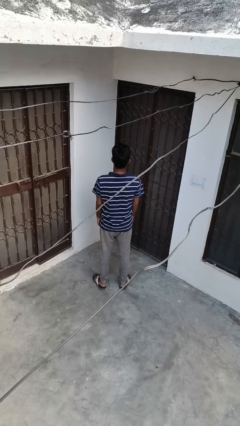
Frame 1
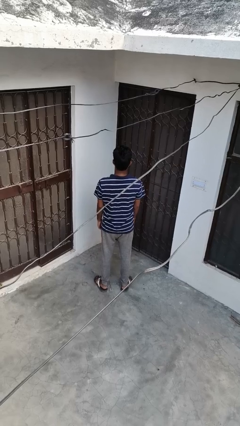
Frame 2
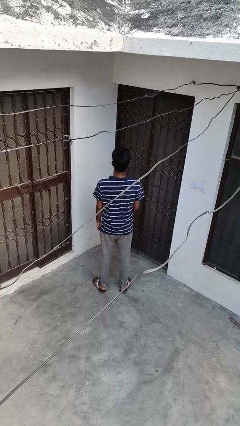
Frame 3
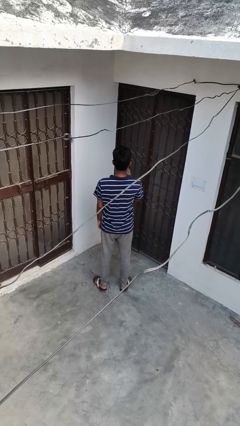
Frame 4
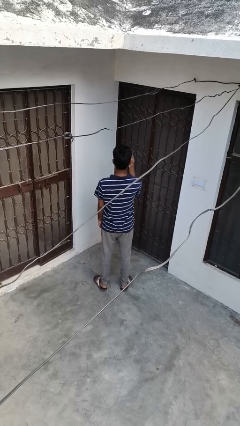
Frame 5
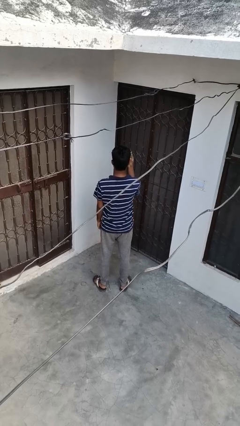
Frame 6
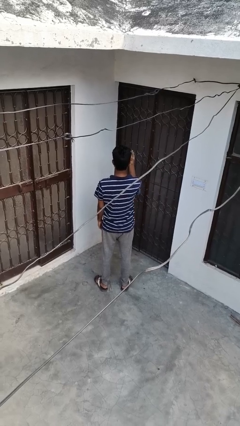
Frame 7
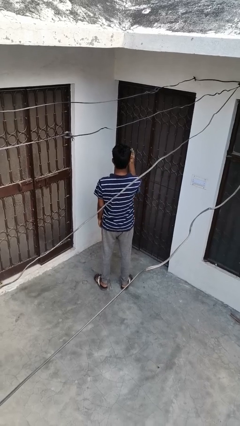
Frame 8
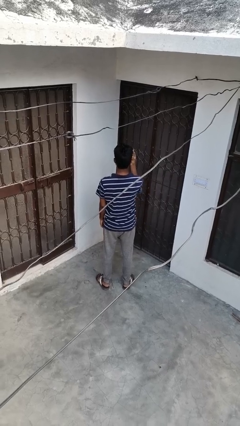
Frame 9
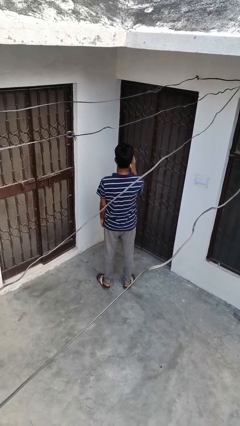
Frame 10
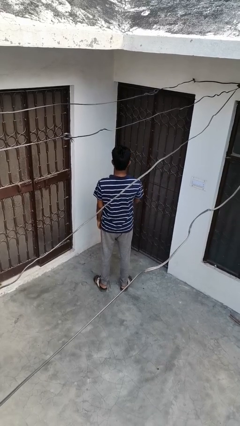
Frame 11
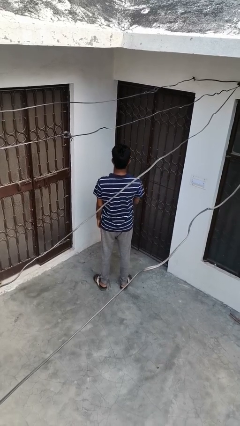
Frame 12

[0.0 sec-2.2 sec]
person gestures number four

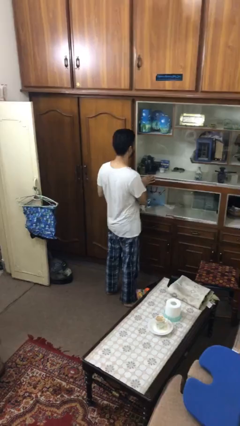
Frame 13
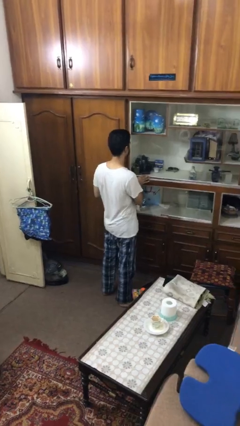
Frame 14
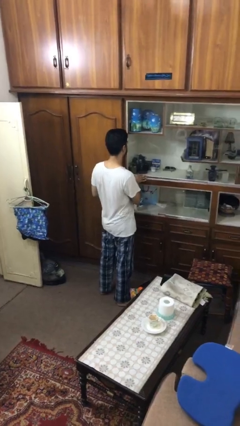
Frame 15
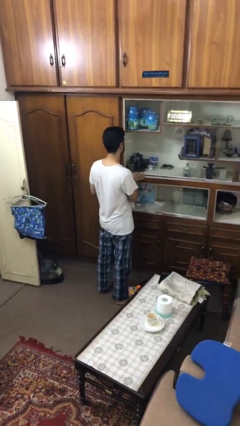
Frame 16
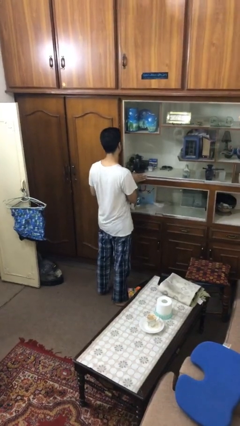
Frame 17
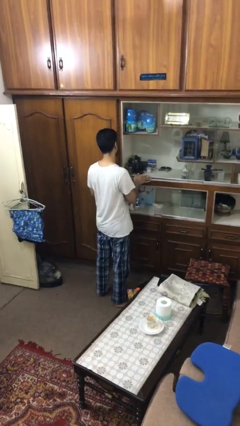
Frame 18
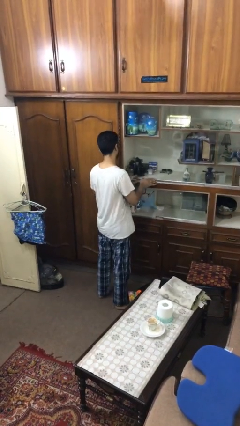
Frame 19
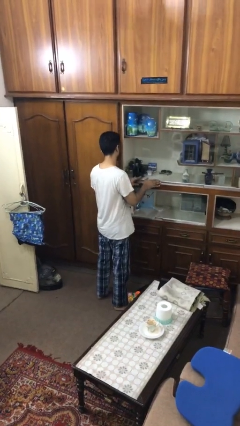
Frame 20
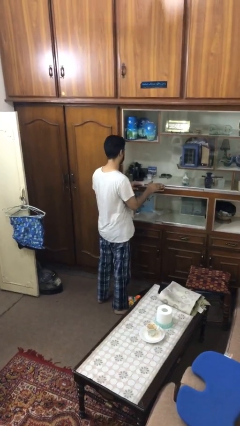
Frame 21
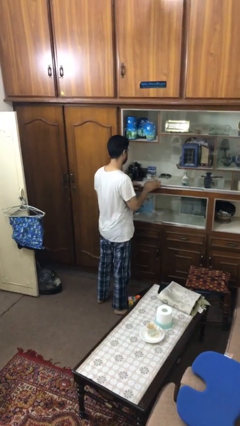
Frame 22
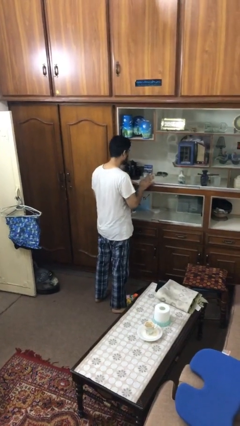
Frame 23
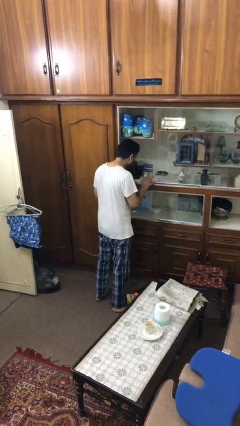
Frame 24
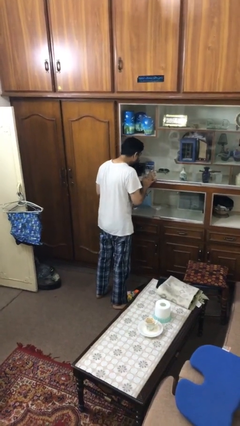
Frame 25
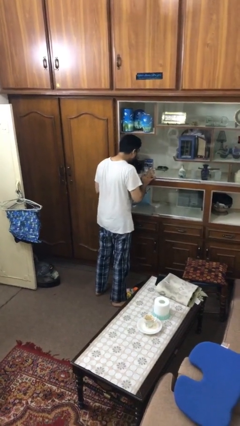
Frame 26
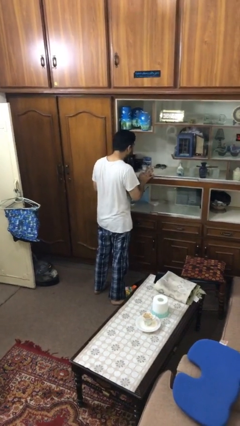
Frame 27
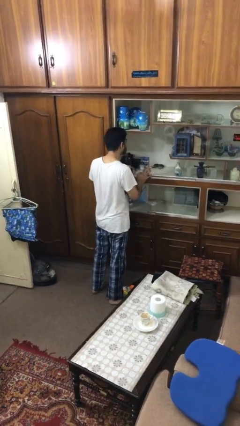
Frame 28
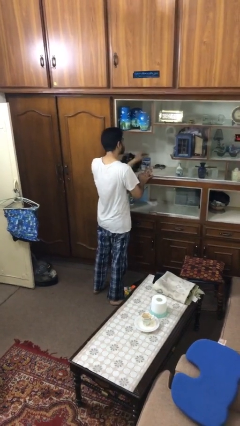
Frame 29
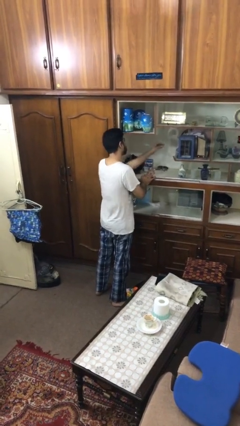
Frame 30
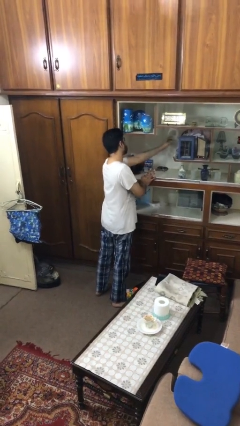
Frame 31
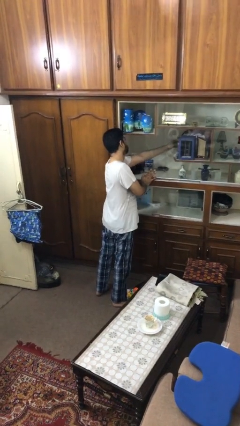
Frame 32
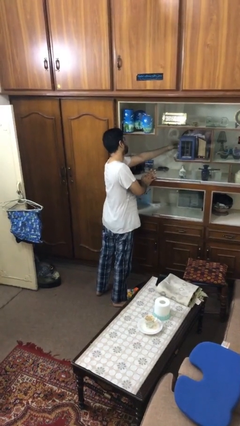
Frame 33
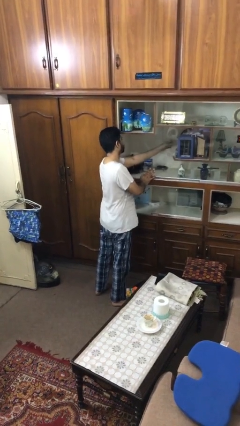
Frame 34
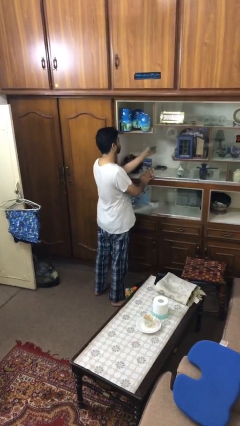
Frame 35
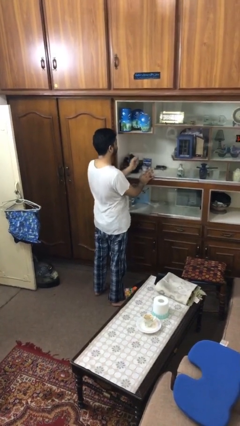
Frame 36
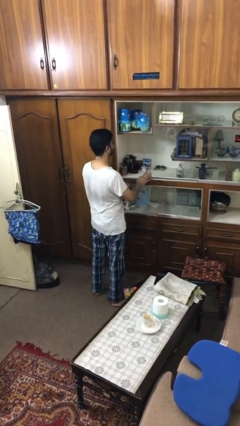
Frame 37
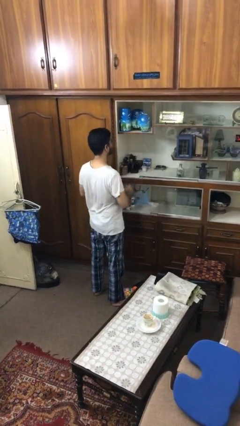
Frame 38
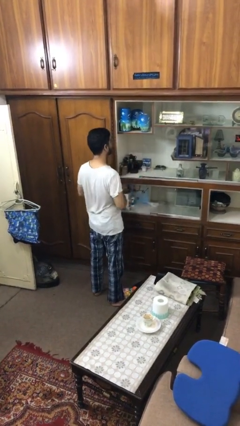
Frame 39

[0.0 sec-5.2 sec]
person searches in cabinet

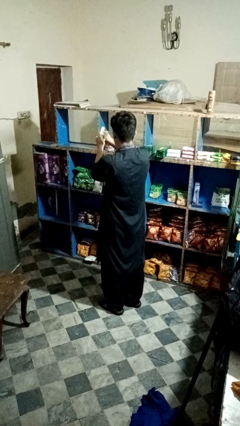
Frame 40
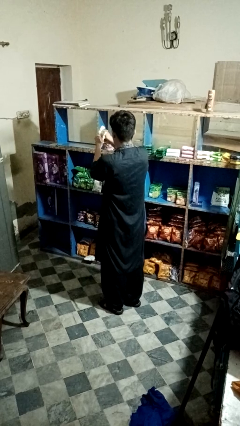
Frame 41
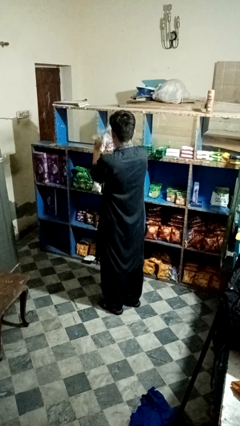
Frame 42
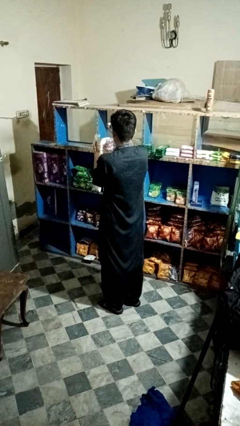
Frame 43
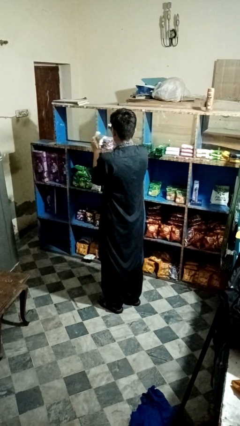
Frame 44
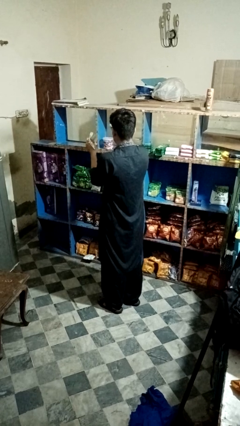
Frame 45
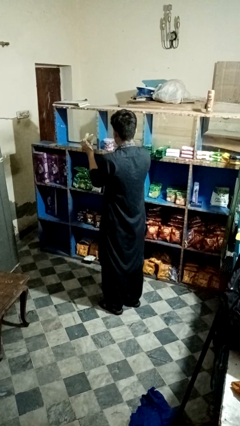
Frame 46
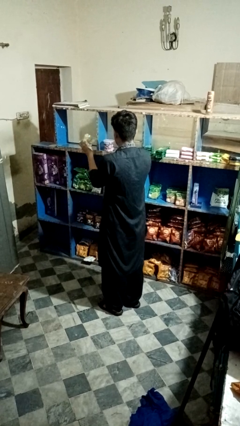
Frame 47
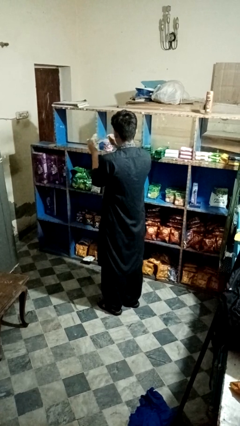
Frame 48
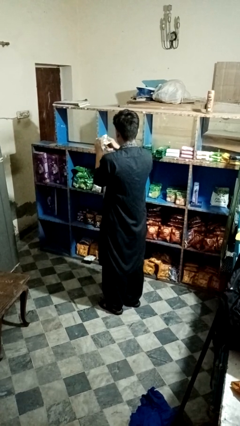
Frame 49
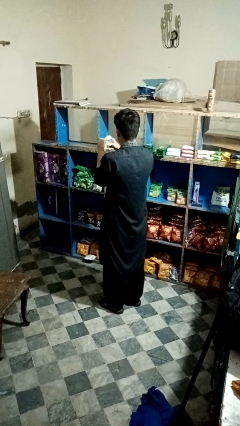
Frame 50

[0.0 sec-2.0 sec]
person tears paper

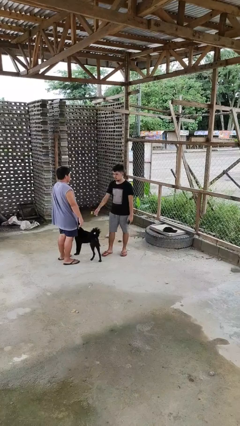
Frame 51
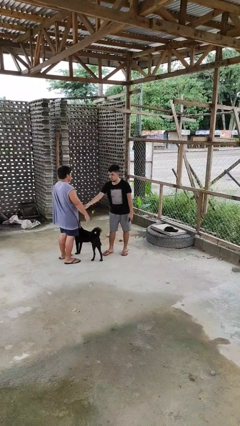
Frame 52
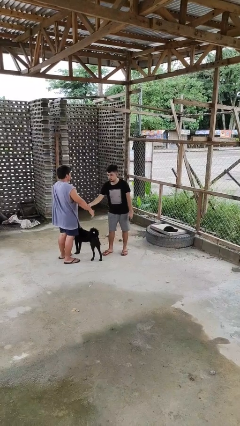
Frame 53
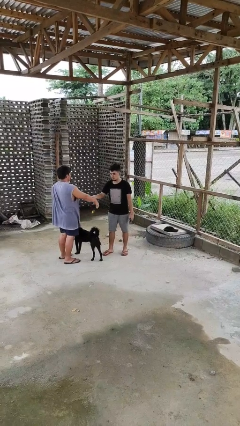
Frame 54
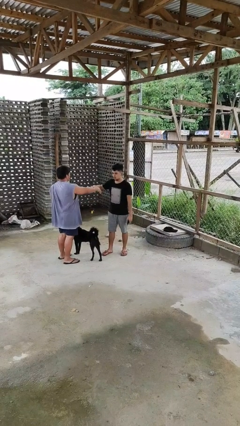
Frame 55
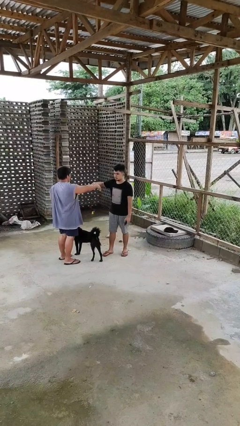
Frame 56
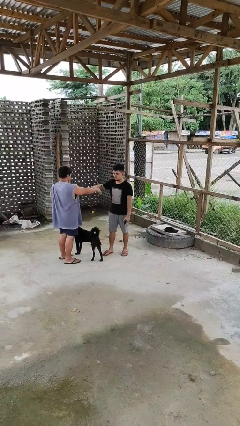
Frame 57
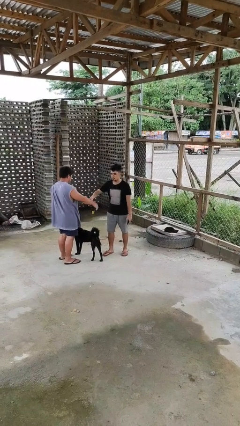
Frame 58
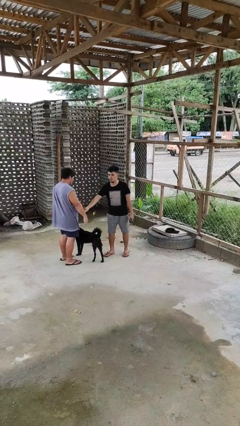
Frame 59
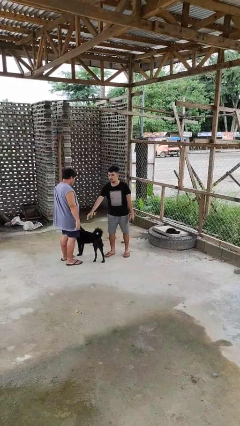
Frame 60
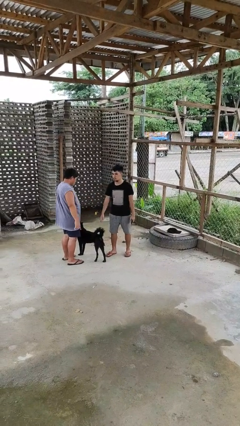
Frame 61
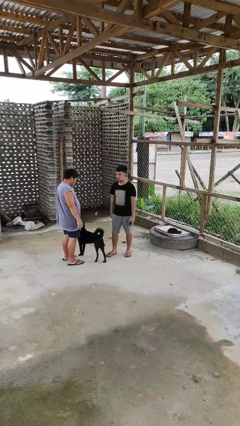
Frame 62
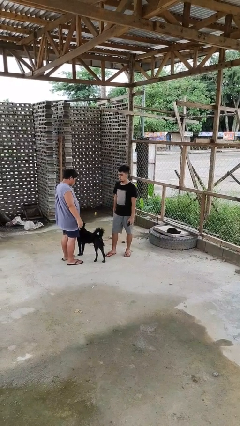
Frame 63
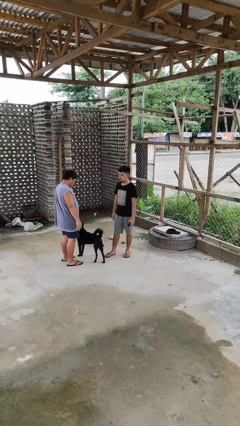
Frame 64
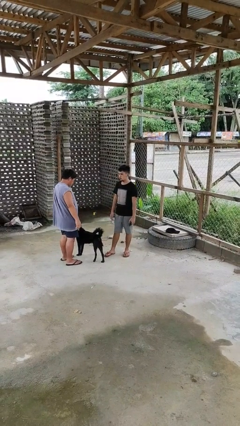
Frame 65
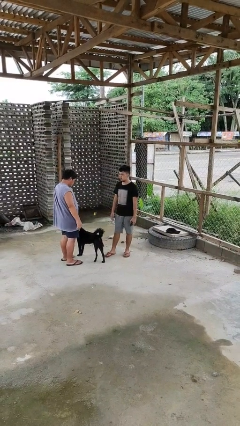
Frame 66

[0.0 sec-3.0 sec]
person grabs person by forearm

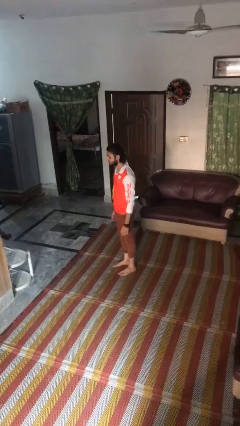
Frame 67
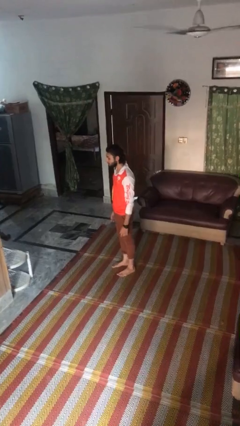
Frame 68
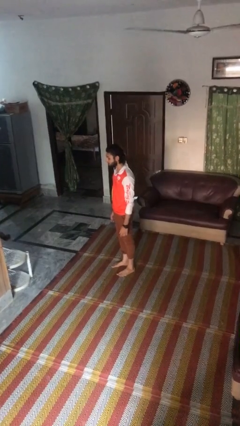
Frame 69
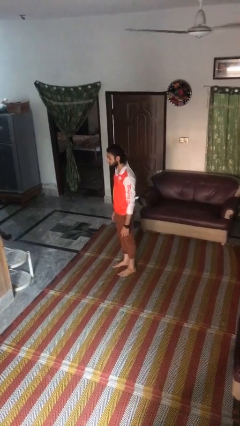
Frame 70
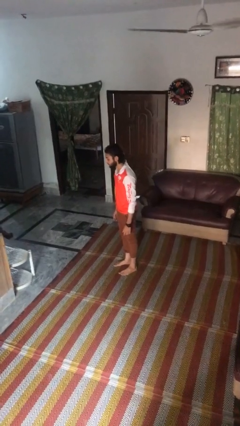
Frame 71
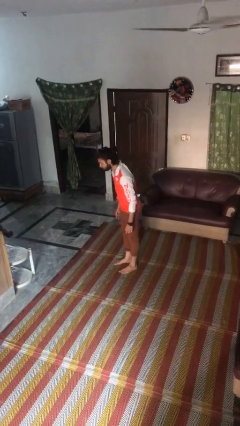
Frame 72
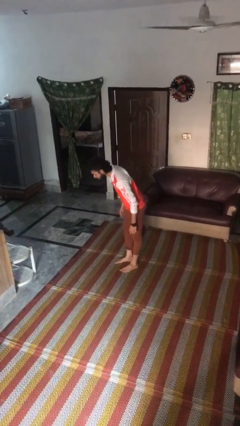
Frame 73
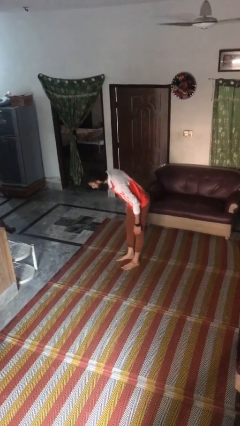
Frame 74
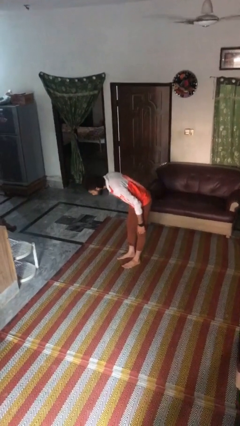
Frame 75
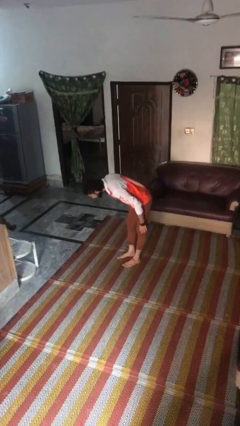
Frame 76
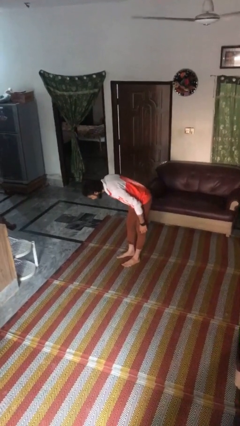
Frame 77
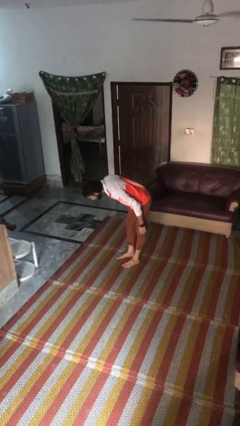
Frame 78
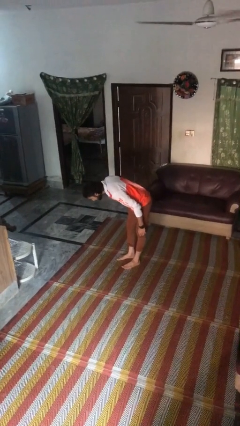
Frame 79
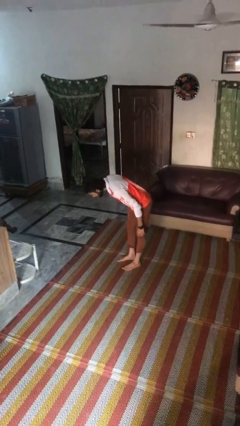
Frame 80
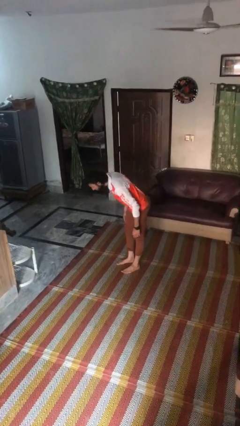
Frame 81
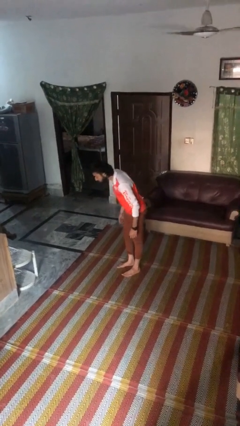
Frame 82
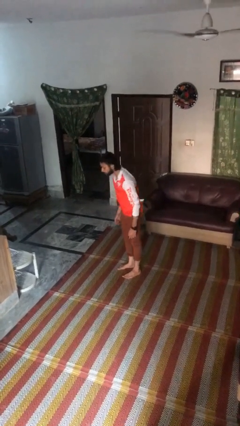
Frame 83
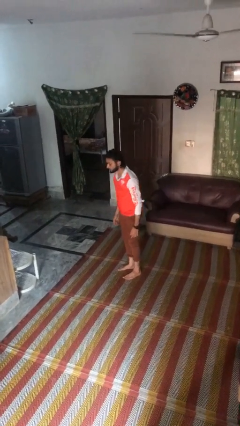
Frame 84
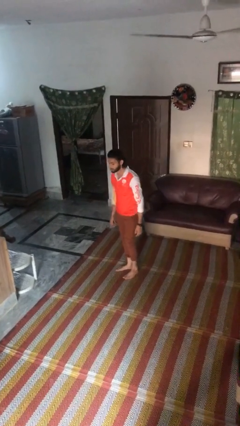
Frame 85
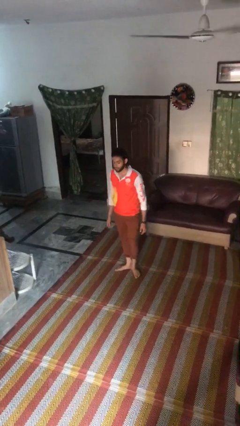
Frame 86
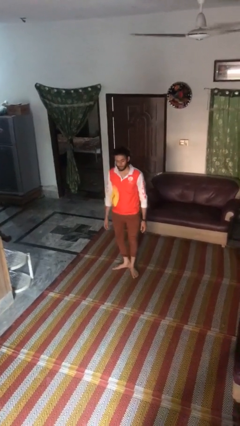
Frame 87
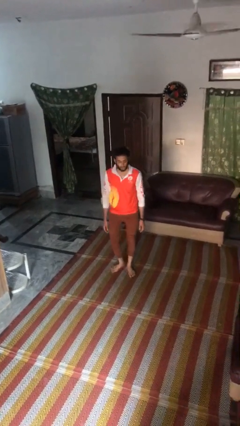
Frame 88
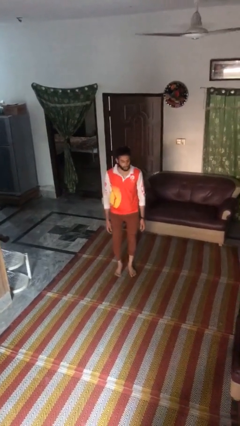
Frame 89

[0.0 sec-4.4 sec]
person bows

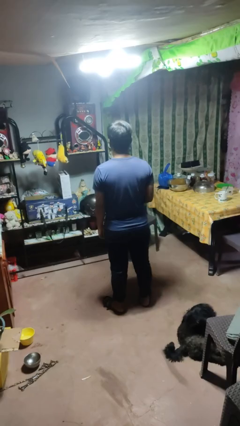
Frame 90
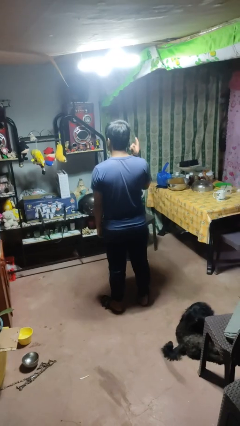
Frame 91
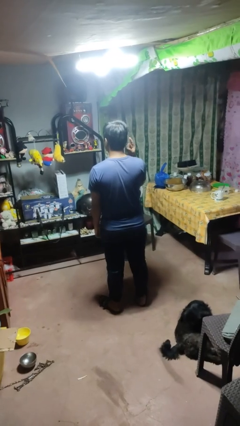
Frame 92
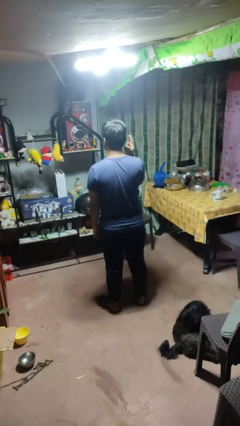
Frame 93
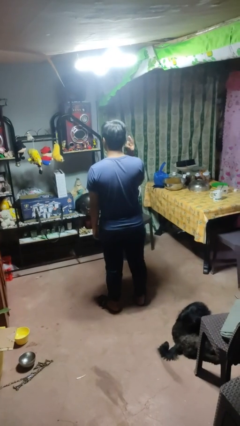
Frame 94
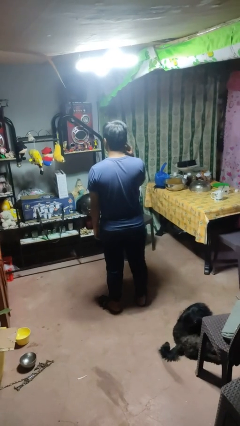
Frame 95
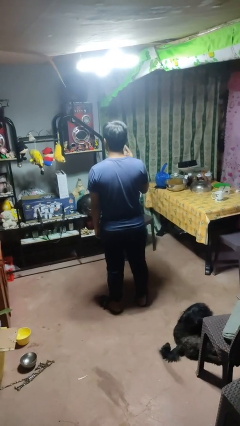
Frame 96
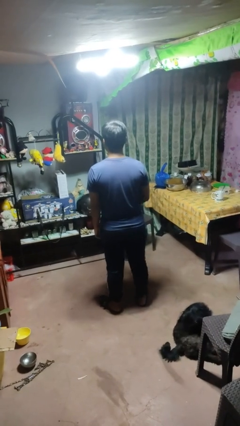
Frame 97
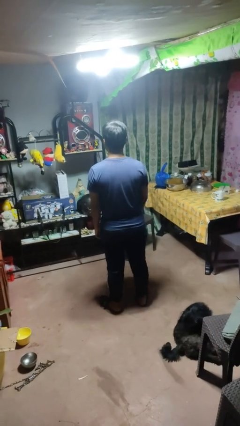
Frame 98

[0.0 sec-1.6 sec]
person gestures listen closely
